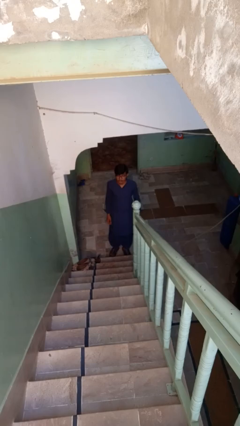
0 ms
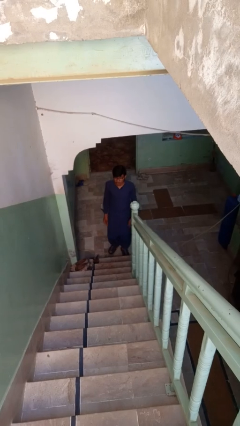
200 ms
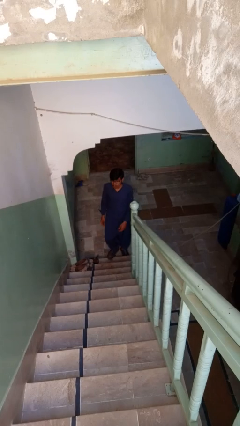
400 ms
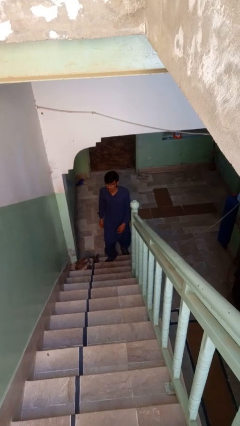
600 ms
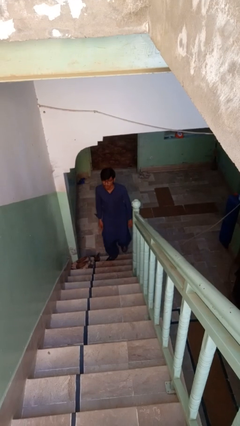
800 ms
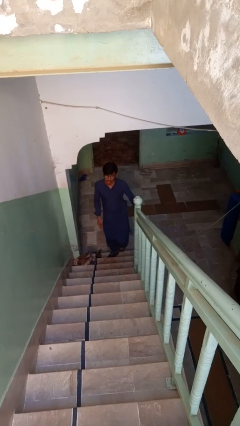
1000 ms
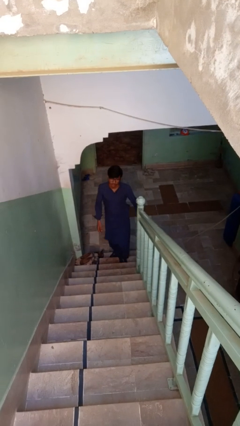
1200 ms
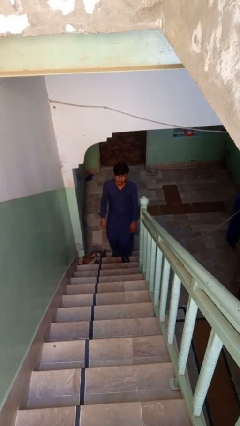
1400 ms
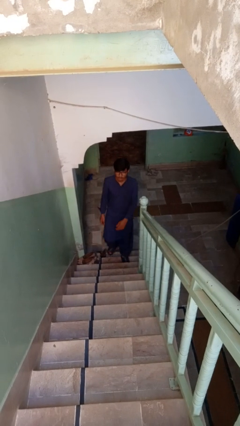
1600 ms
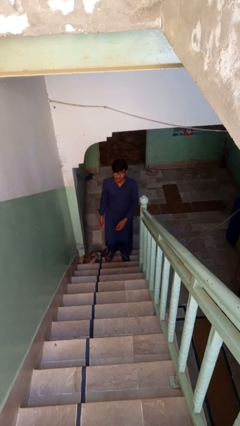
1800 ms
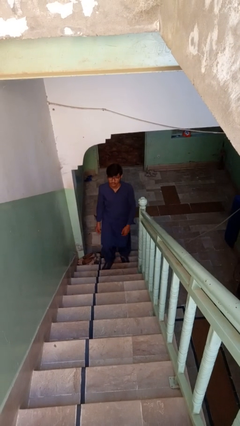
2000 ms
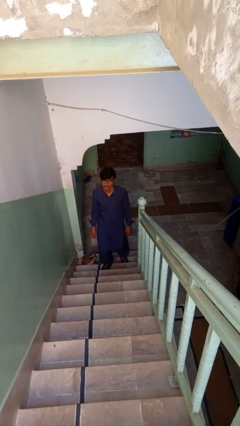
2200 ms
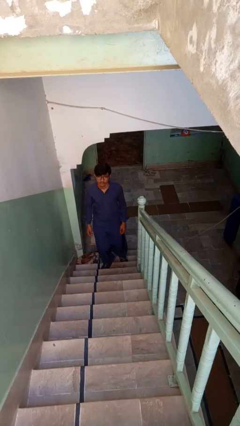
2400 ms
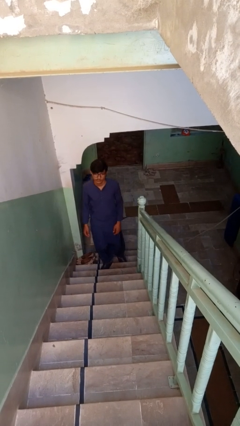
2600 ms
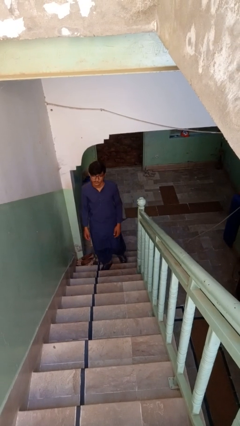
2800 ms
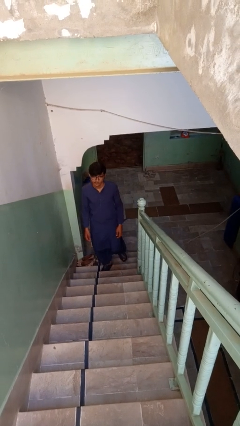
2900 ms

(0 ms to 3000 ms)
person climbs up stairs

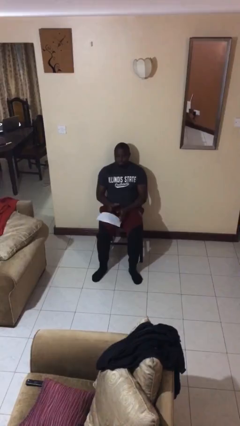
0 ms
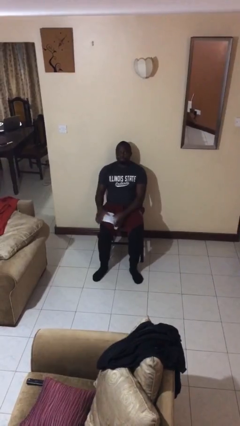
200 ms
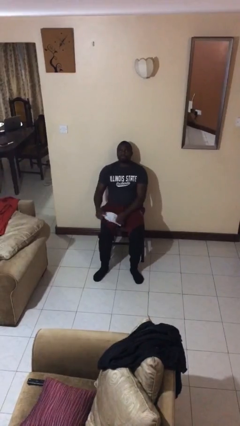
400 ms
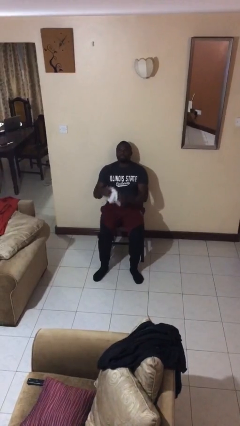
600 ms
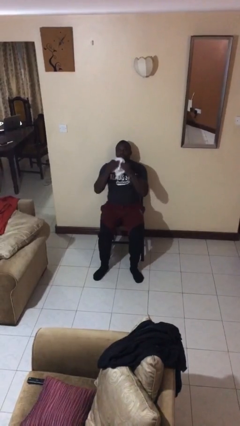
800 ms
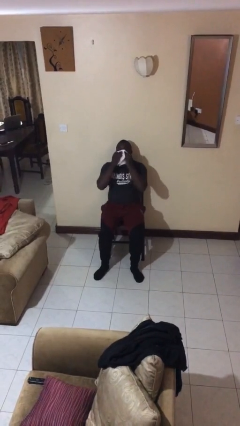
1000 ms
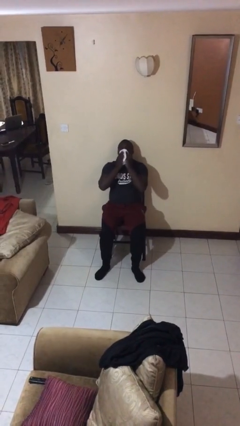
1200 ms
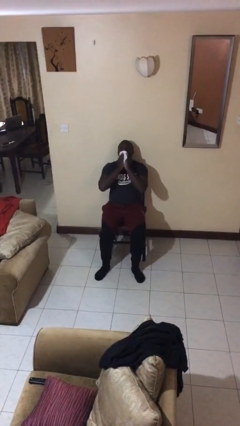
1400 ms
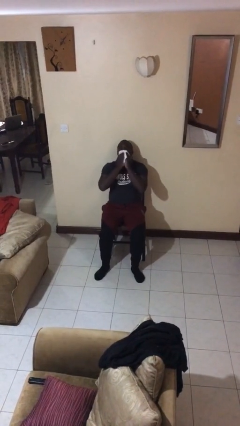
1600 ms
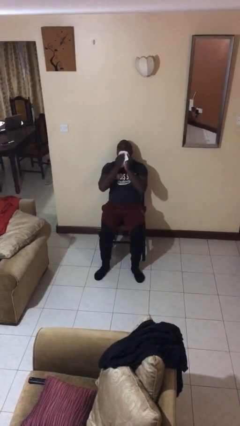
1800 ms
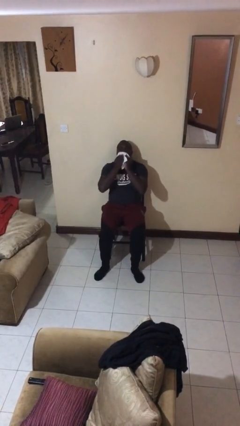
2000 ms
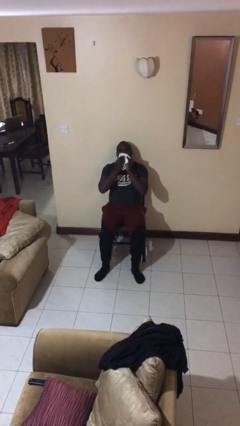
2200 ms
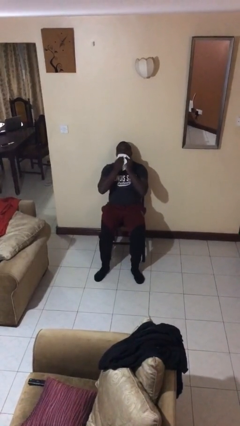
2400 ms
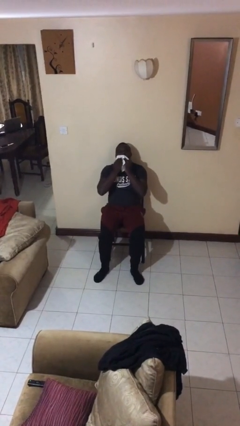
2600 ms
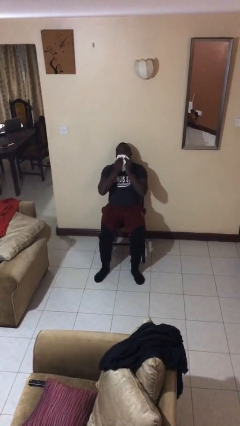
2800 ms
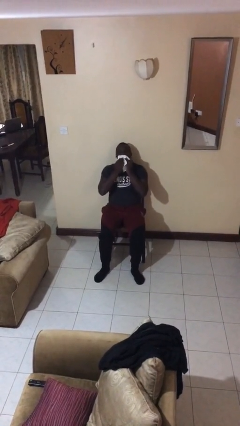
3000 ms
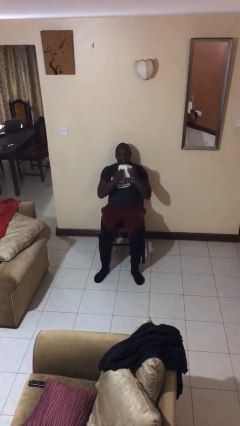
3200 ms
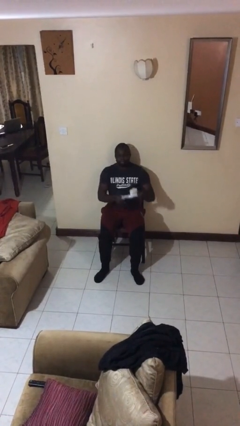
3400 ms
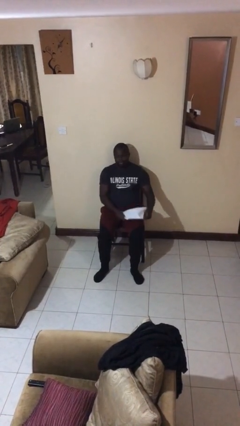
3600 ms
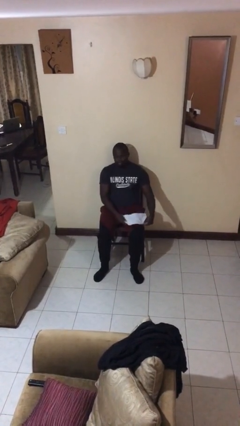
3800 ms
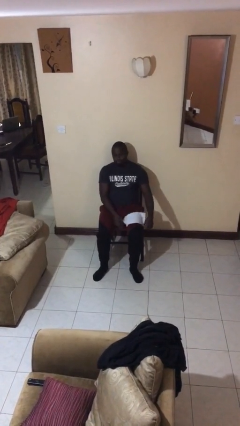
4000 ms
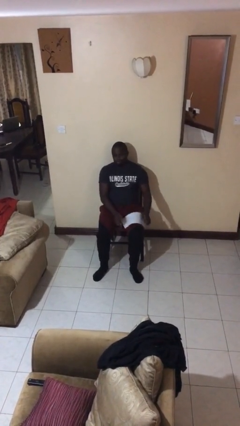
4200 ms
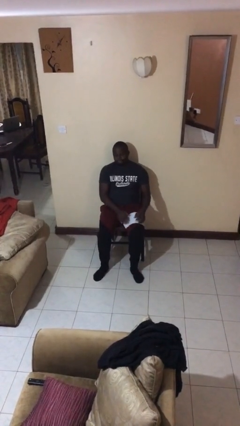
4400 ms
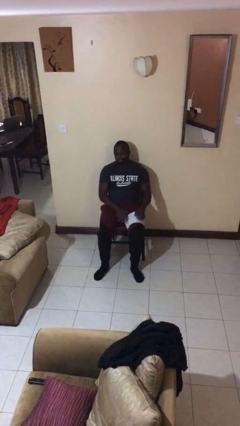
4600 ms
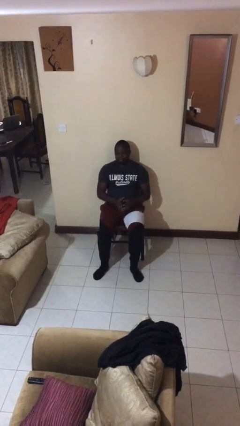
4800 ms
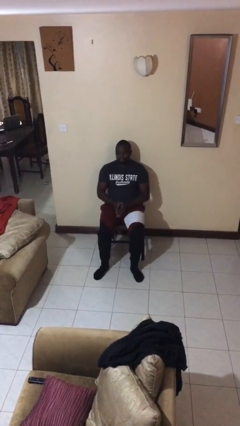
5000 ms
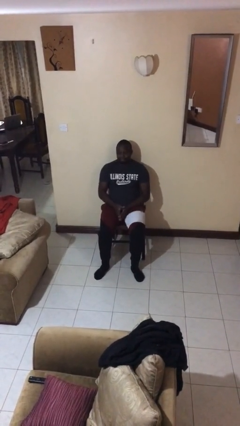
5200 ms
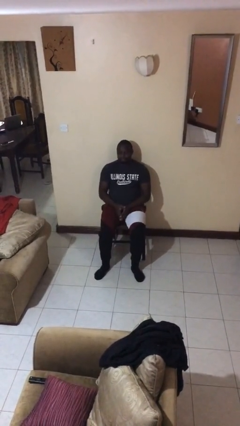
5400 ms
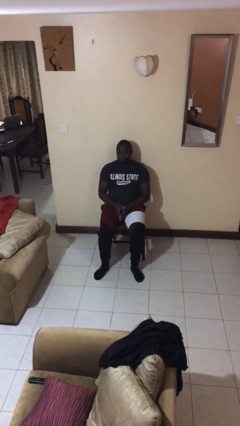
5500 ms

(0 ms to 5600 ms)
person wipes mouth with napkin

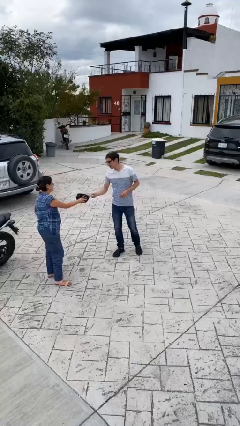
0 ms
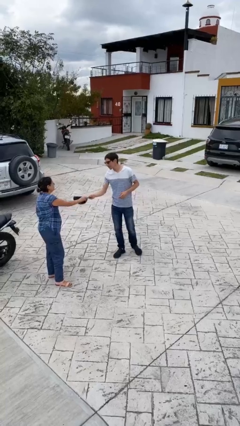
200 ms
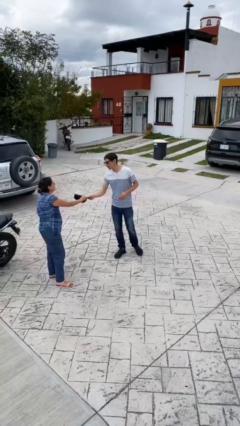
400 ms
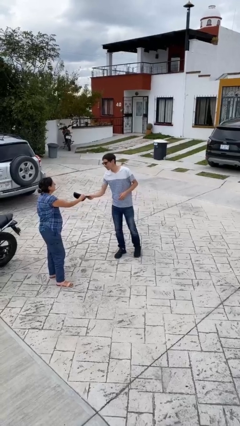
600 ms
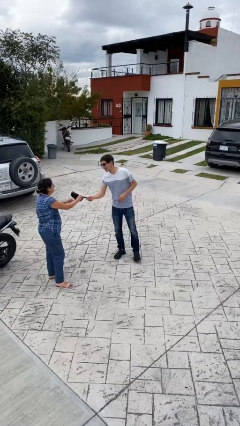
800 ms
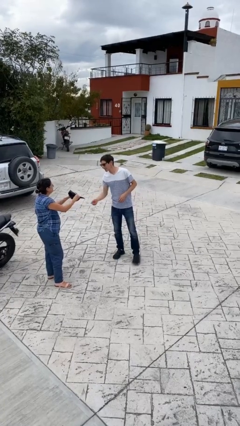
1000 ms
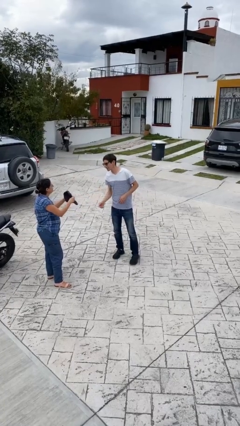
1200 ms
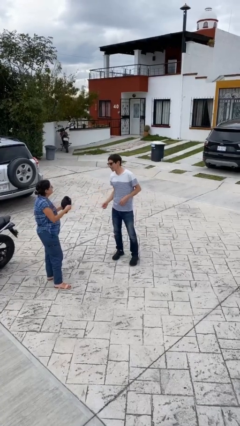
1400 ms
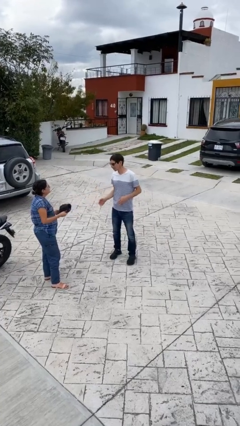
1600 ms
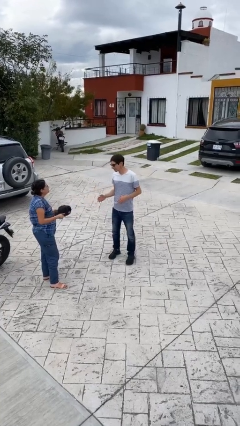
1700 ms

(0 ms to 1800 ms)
person transfers object to person

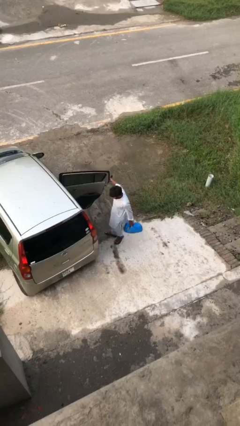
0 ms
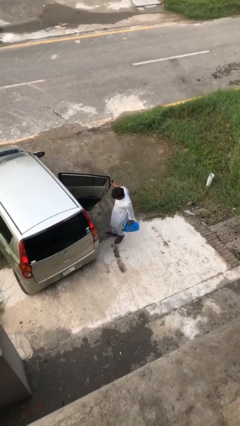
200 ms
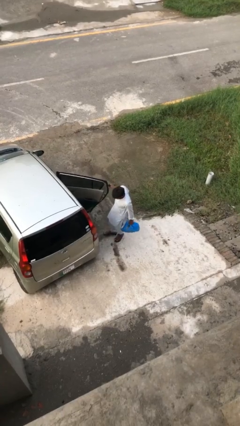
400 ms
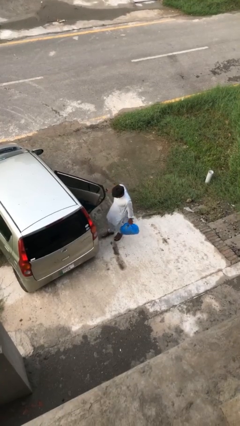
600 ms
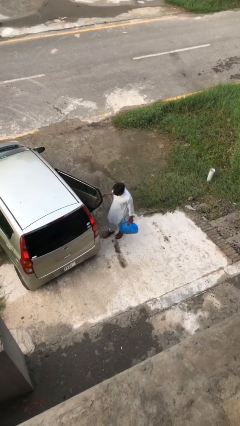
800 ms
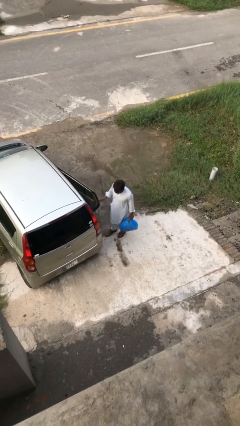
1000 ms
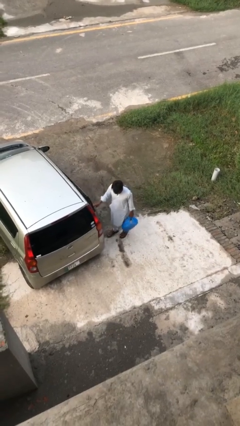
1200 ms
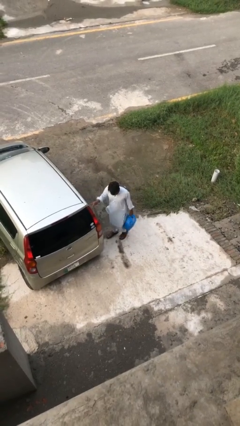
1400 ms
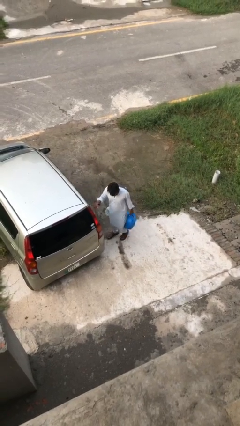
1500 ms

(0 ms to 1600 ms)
person closes car door

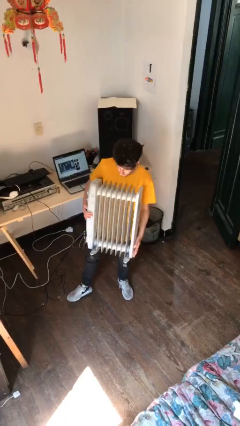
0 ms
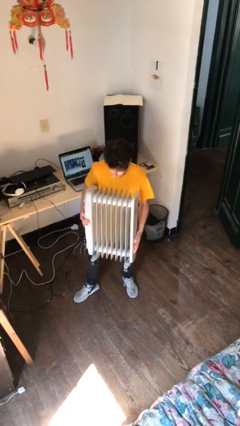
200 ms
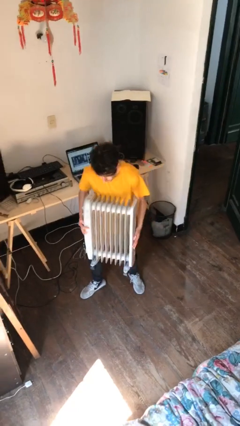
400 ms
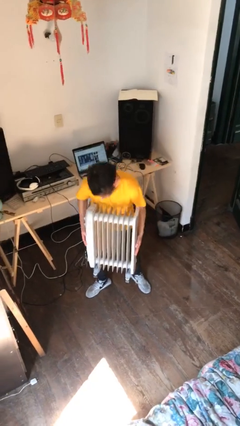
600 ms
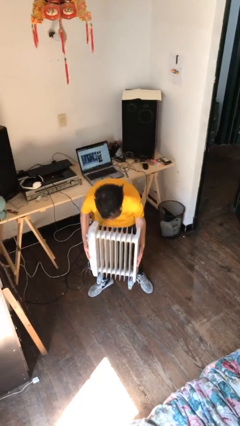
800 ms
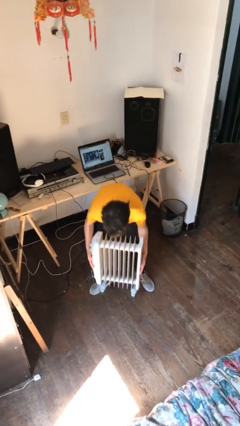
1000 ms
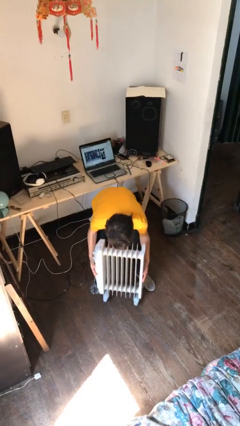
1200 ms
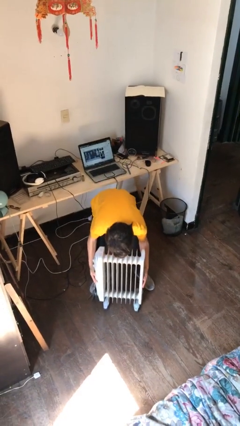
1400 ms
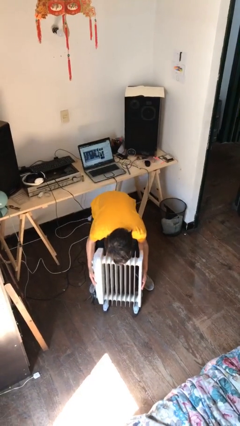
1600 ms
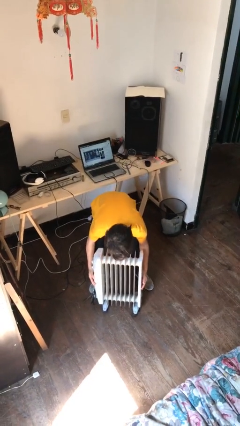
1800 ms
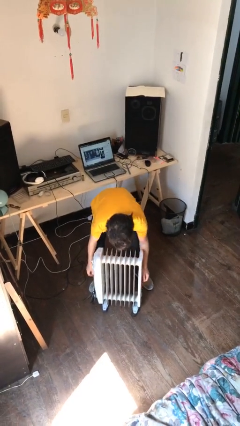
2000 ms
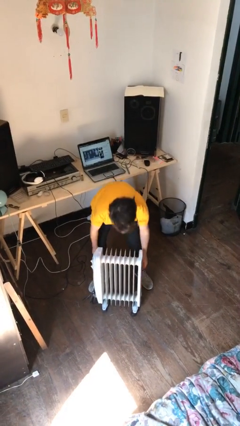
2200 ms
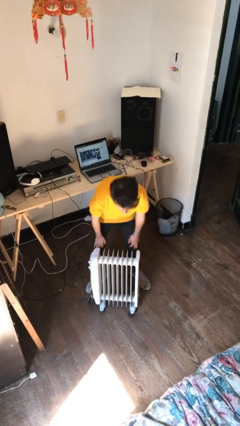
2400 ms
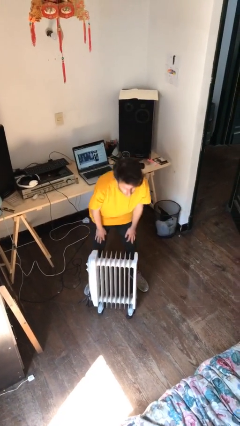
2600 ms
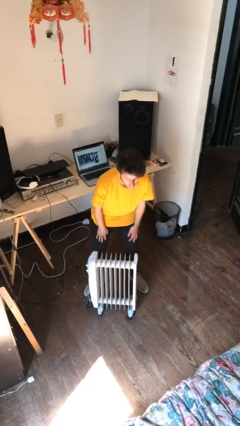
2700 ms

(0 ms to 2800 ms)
person puts down object on floor

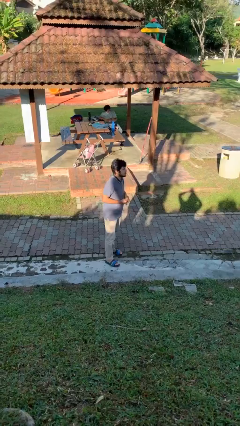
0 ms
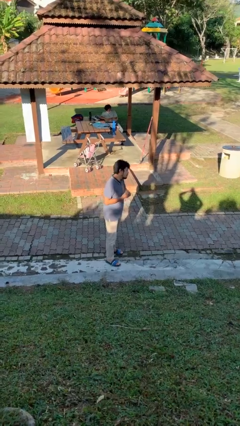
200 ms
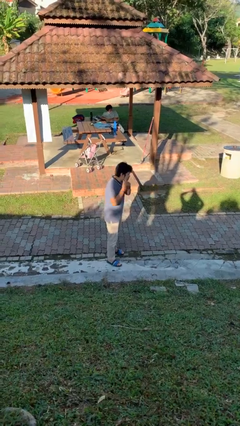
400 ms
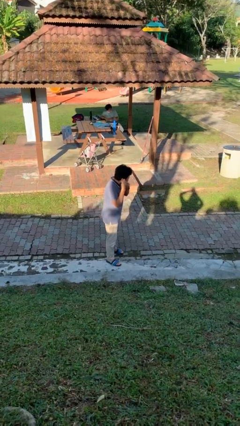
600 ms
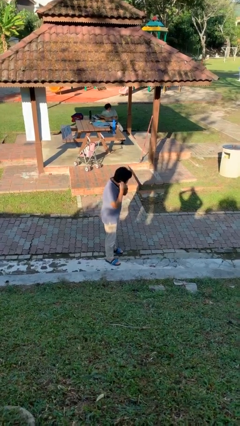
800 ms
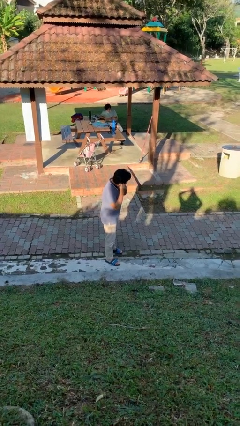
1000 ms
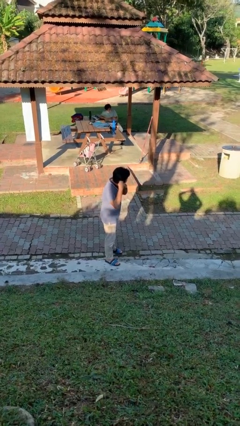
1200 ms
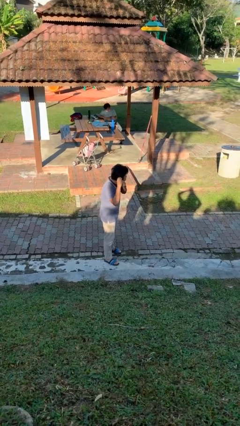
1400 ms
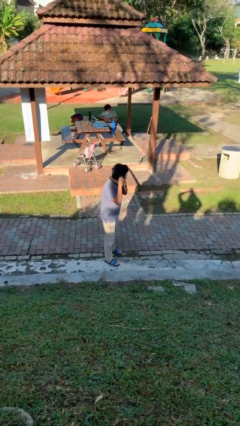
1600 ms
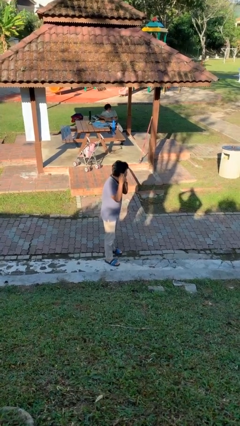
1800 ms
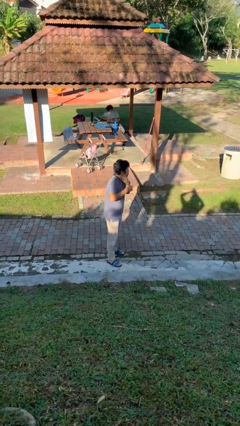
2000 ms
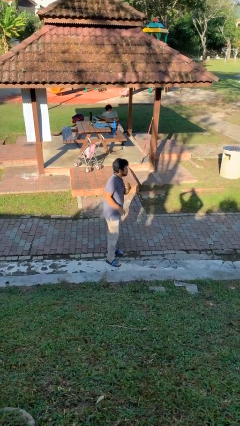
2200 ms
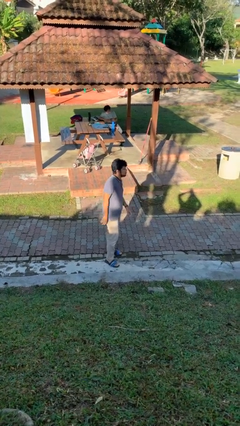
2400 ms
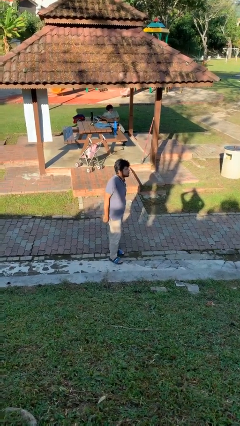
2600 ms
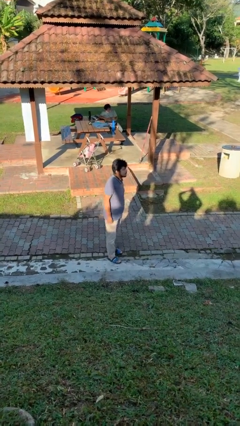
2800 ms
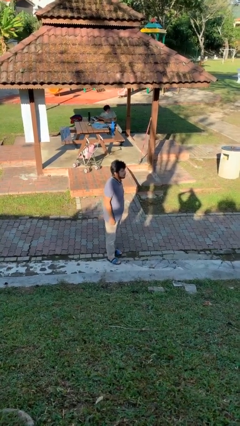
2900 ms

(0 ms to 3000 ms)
person puts on earrings
